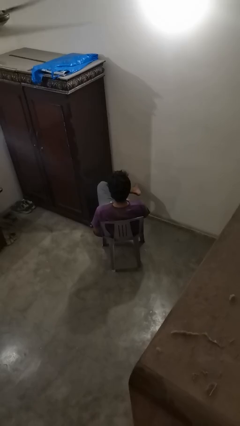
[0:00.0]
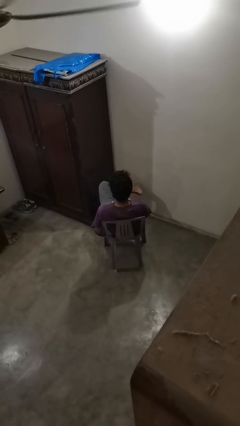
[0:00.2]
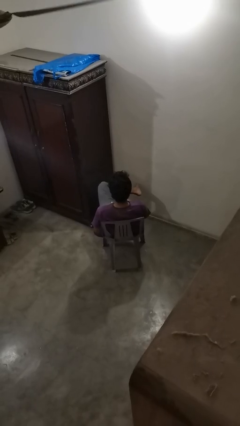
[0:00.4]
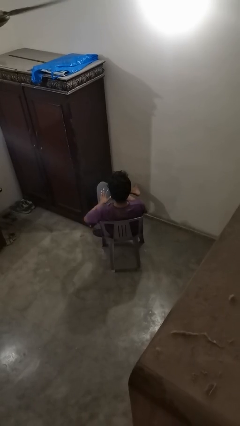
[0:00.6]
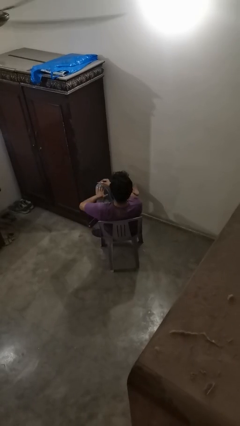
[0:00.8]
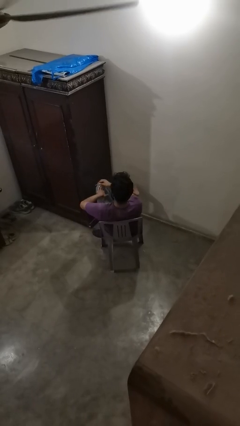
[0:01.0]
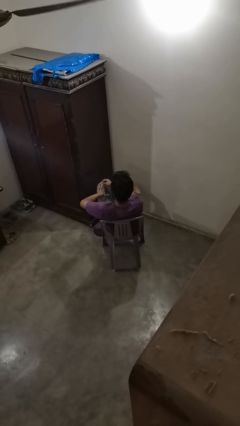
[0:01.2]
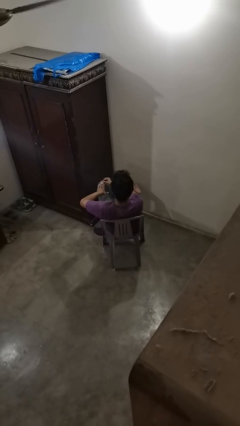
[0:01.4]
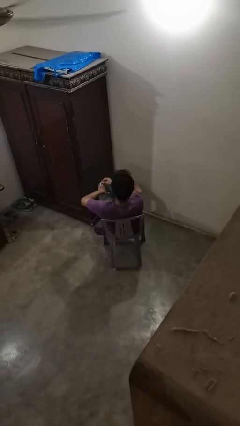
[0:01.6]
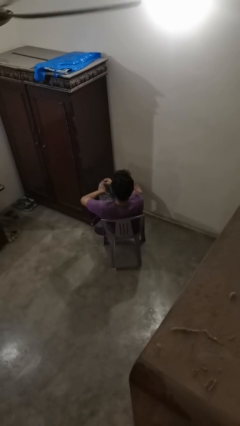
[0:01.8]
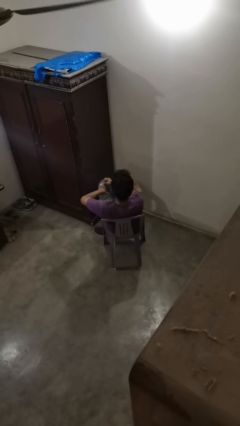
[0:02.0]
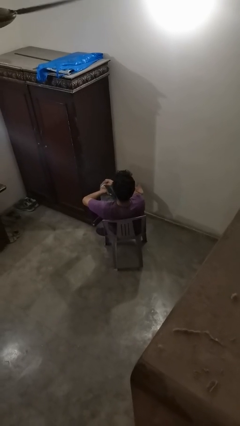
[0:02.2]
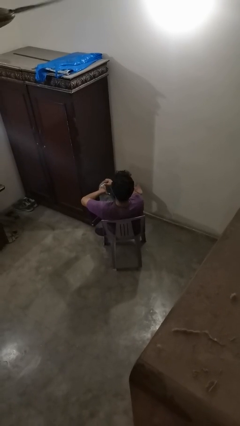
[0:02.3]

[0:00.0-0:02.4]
person files fingernails

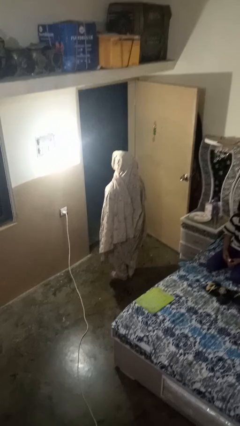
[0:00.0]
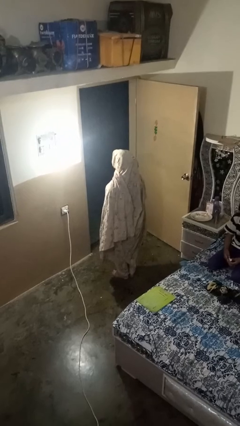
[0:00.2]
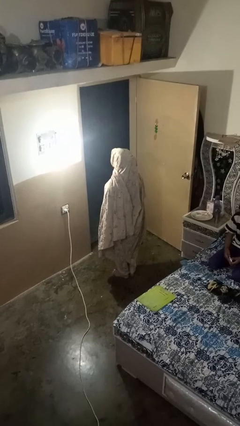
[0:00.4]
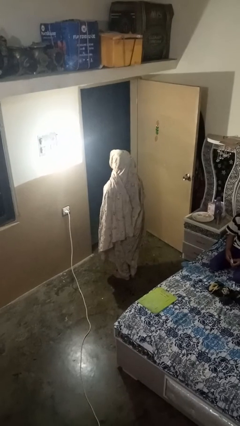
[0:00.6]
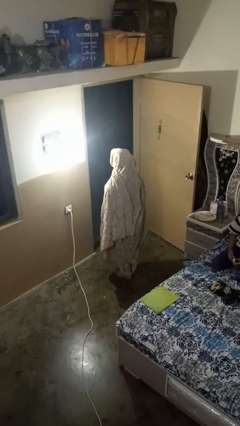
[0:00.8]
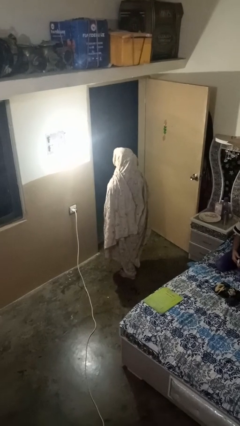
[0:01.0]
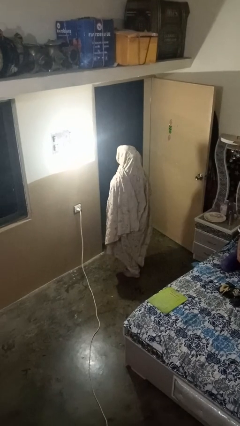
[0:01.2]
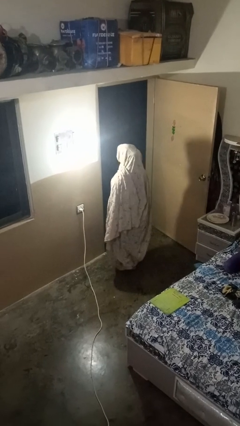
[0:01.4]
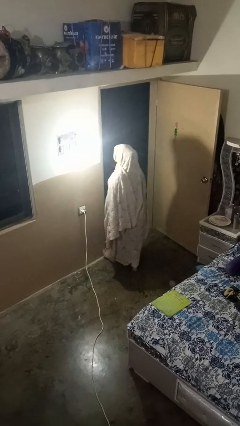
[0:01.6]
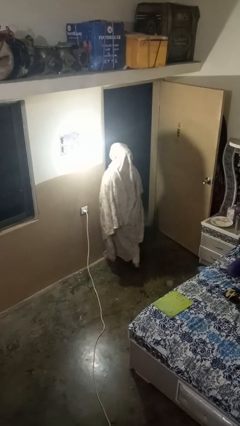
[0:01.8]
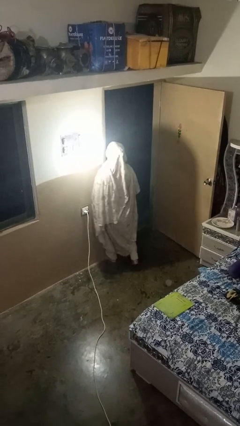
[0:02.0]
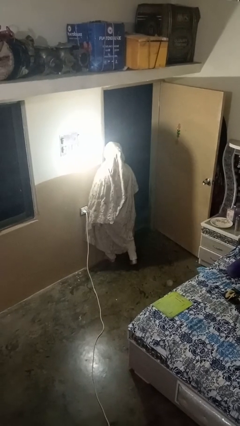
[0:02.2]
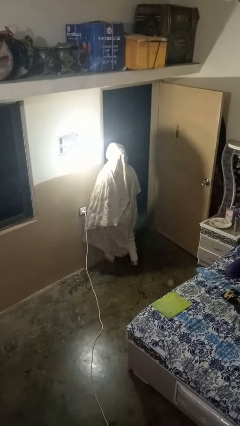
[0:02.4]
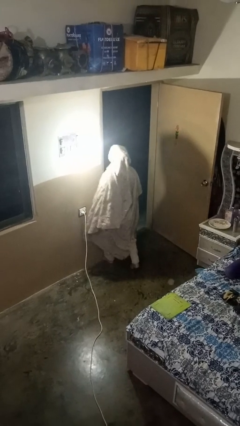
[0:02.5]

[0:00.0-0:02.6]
person bumps into wall

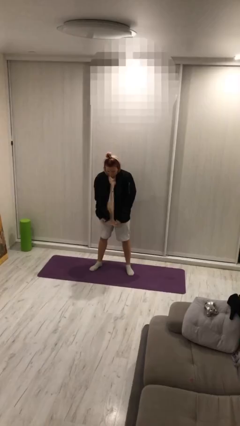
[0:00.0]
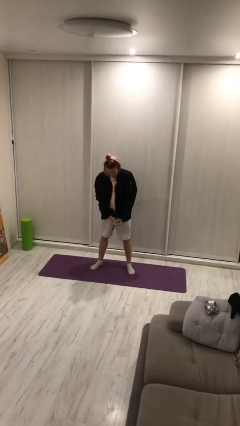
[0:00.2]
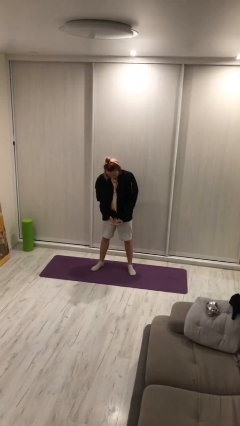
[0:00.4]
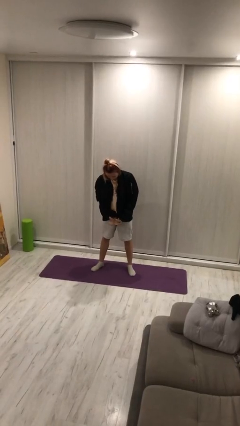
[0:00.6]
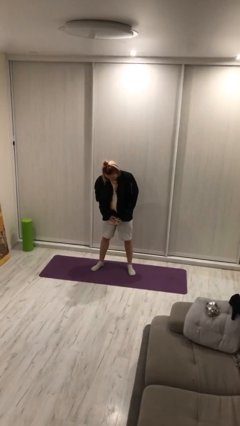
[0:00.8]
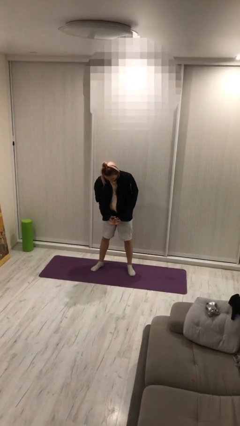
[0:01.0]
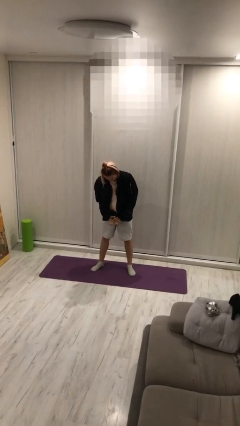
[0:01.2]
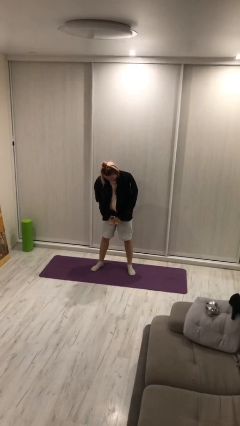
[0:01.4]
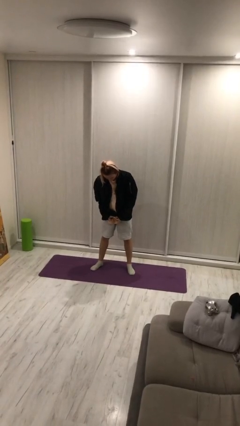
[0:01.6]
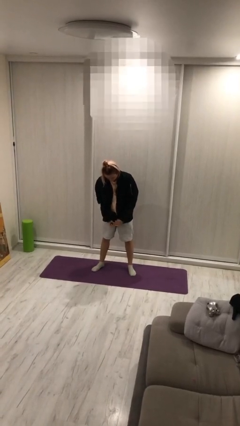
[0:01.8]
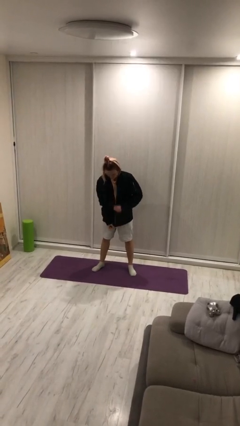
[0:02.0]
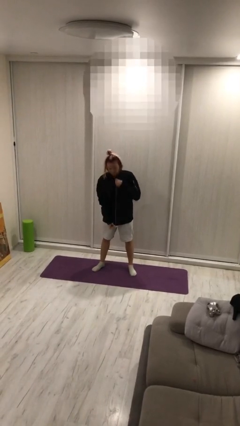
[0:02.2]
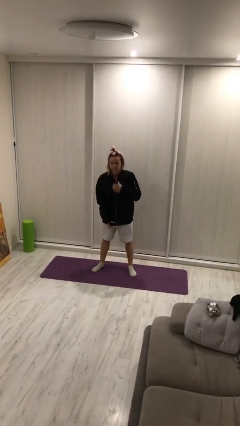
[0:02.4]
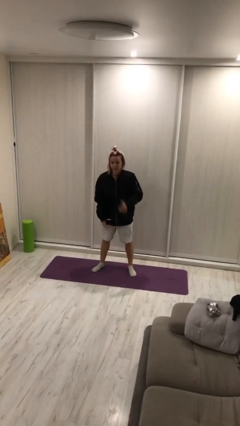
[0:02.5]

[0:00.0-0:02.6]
person zips up jacket

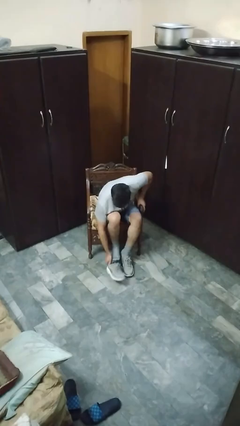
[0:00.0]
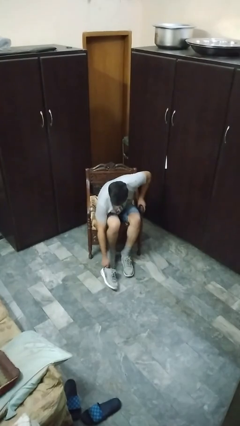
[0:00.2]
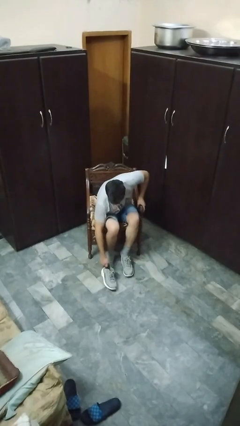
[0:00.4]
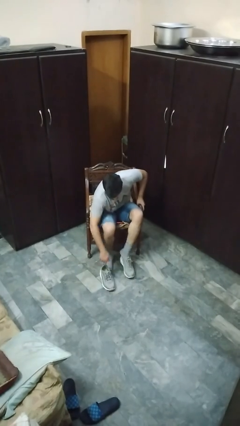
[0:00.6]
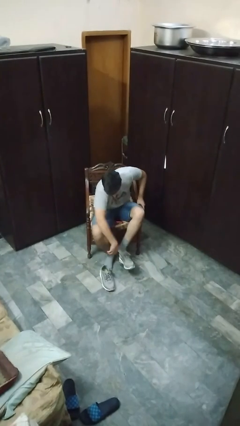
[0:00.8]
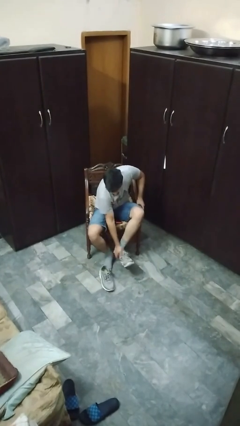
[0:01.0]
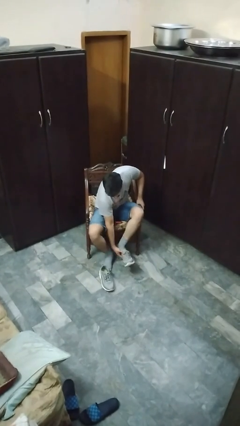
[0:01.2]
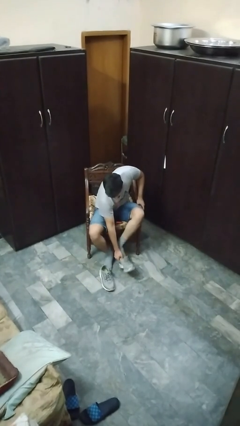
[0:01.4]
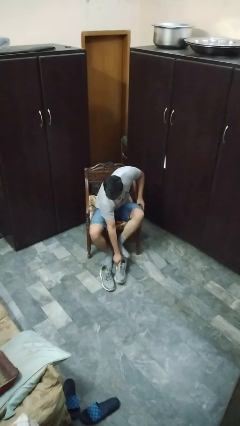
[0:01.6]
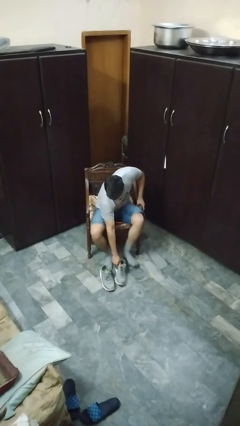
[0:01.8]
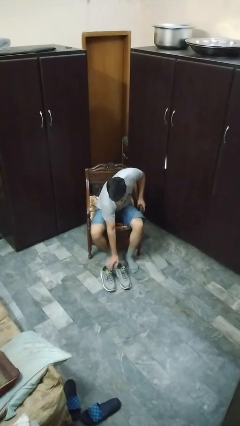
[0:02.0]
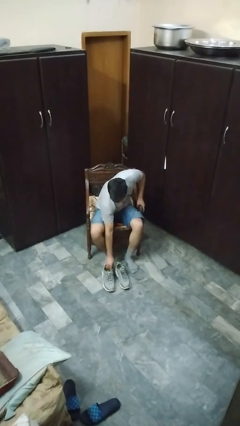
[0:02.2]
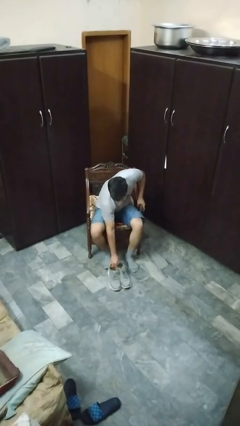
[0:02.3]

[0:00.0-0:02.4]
person takes off shoes

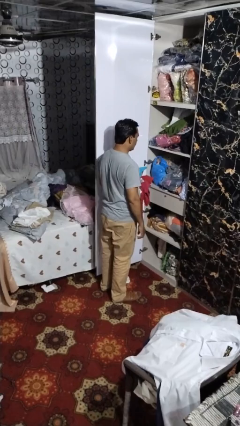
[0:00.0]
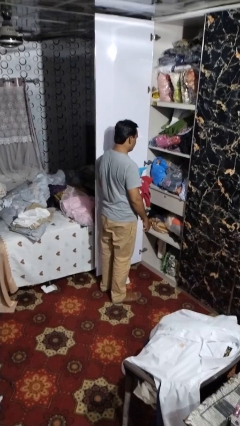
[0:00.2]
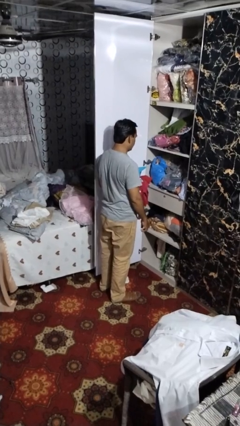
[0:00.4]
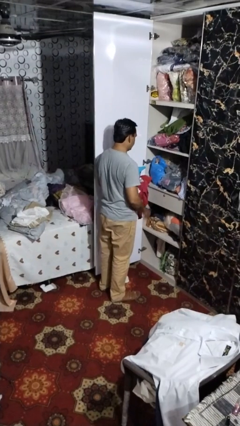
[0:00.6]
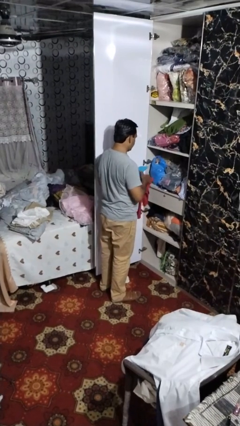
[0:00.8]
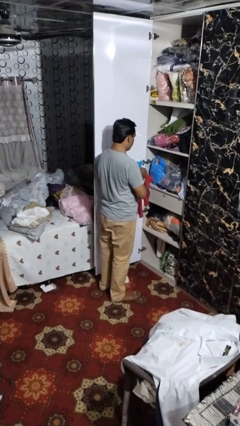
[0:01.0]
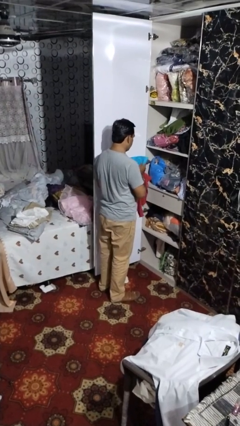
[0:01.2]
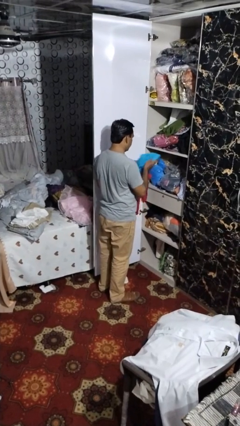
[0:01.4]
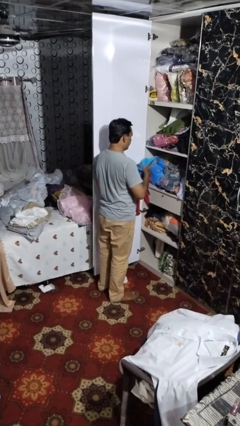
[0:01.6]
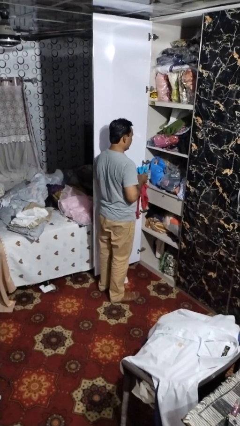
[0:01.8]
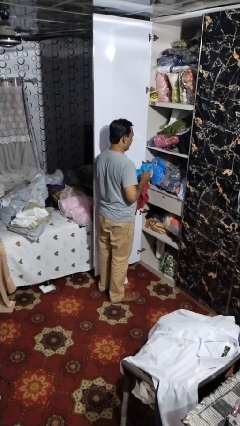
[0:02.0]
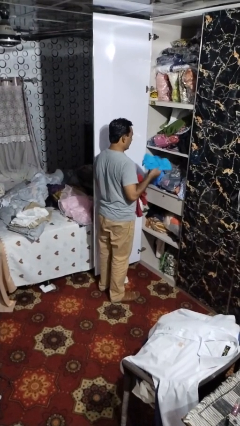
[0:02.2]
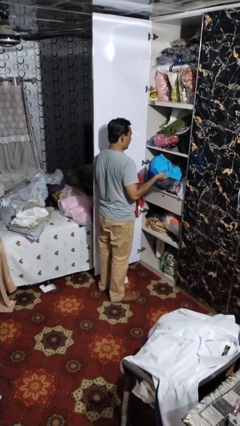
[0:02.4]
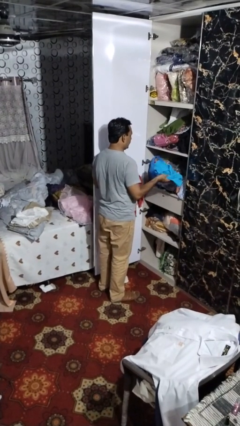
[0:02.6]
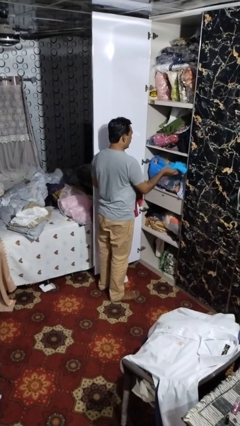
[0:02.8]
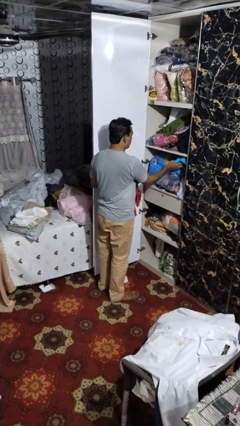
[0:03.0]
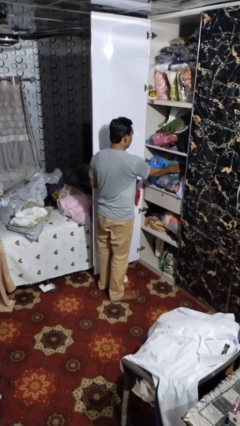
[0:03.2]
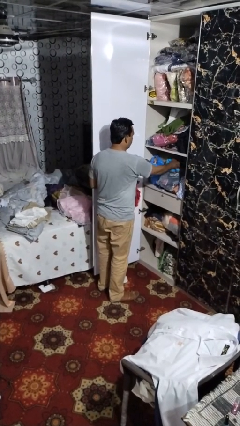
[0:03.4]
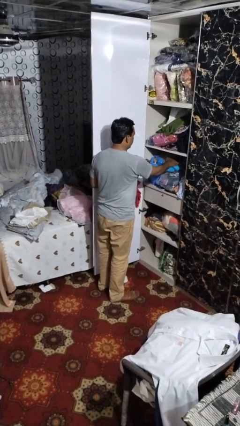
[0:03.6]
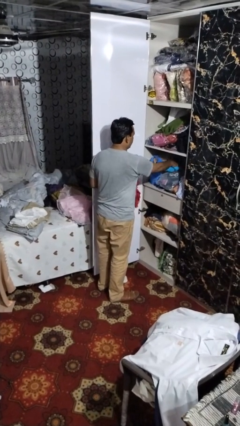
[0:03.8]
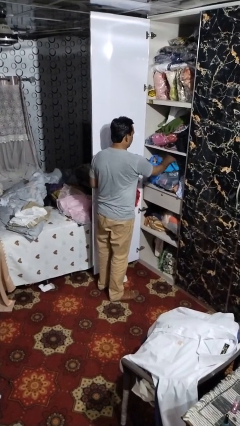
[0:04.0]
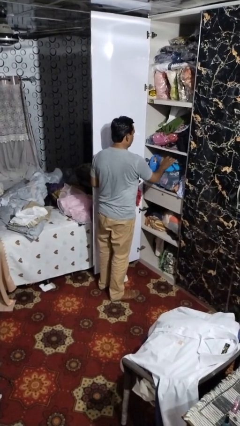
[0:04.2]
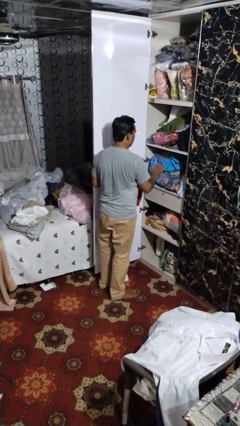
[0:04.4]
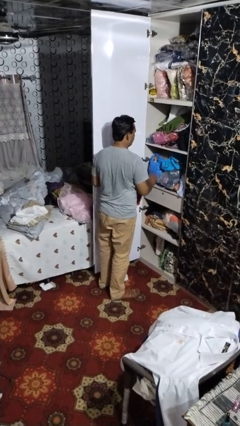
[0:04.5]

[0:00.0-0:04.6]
person puts clothes into dresser

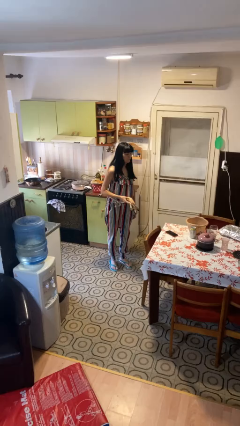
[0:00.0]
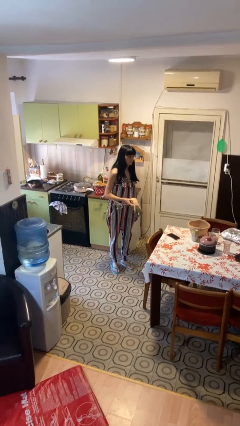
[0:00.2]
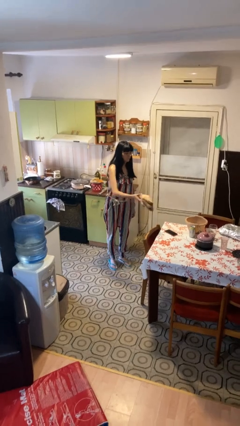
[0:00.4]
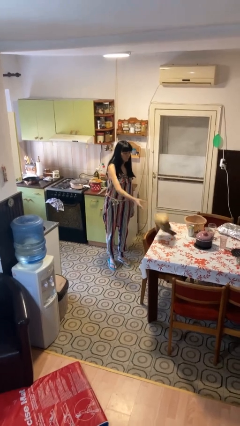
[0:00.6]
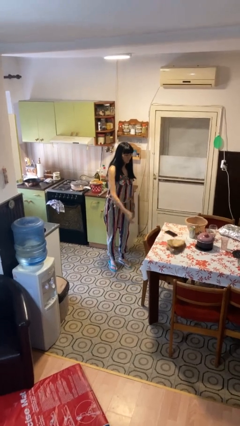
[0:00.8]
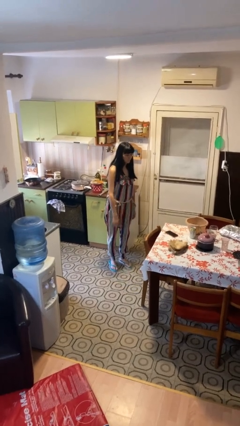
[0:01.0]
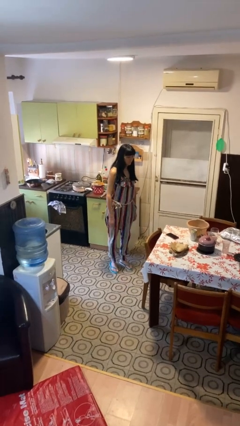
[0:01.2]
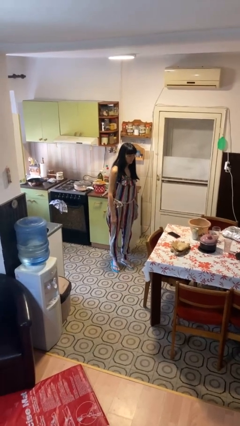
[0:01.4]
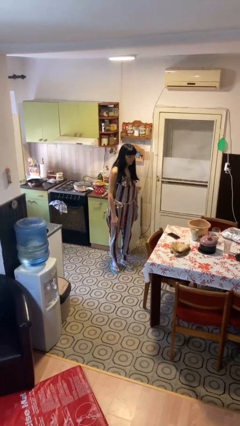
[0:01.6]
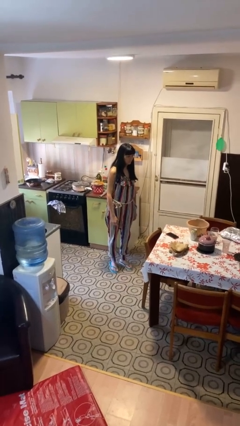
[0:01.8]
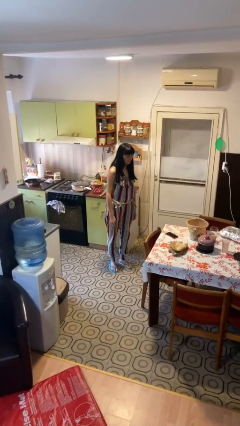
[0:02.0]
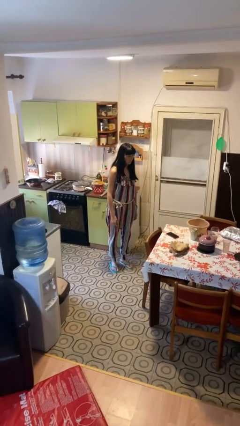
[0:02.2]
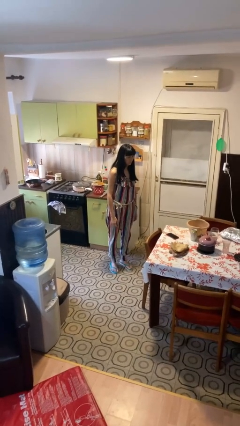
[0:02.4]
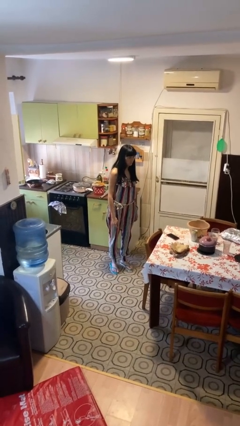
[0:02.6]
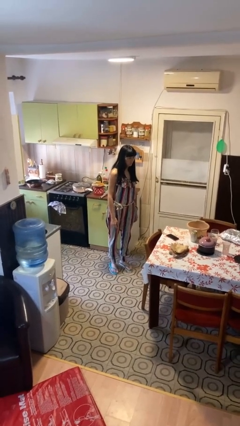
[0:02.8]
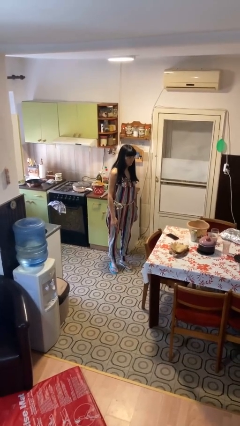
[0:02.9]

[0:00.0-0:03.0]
person throws object on table
